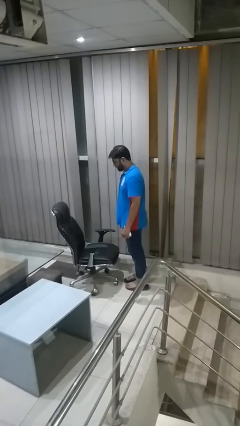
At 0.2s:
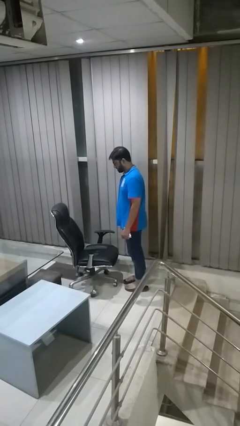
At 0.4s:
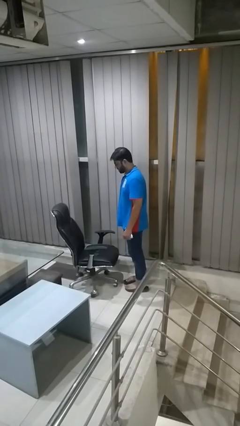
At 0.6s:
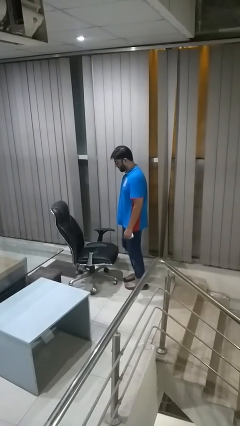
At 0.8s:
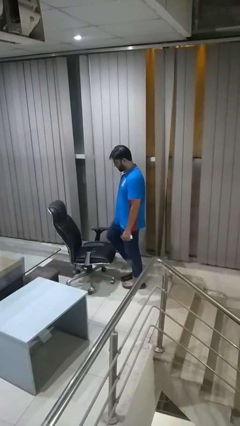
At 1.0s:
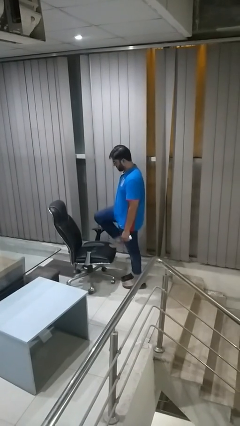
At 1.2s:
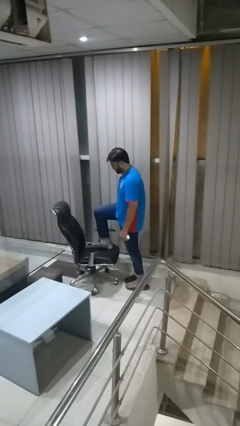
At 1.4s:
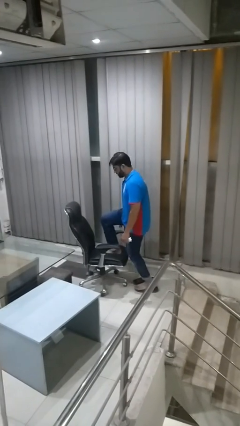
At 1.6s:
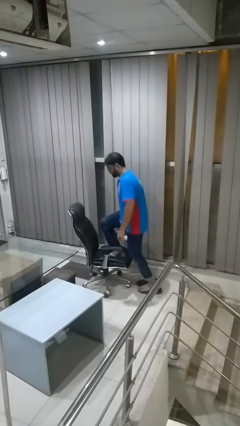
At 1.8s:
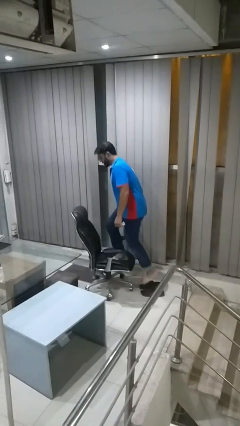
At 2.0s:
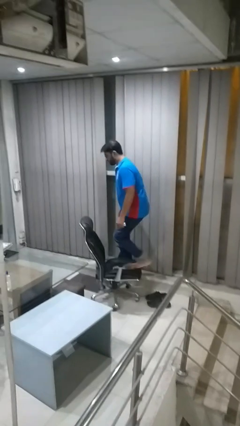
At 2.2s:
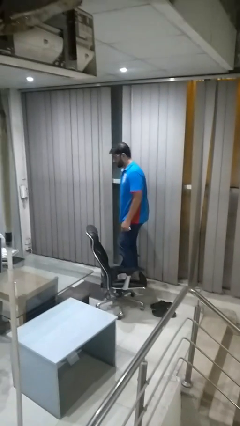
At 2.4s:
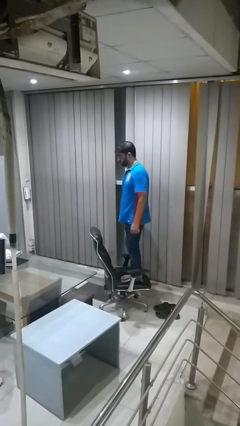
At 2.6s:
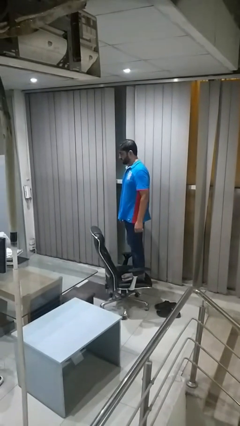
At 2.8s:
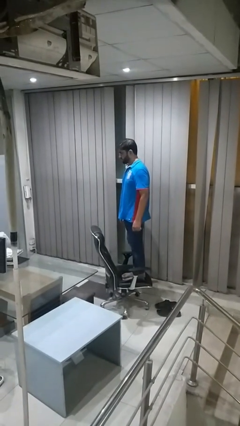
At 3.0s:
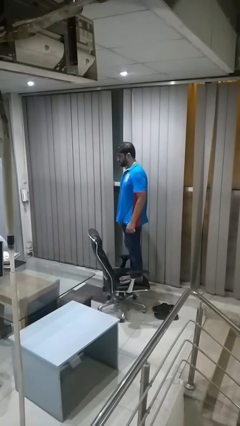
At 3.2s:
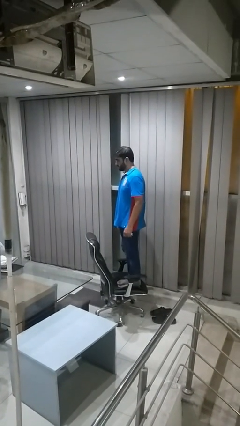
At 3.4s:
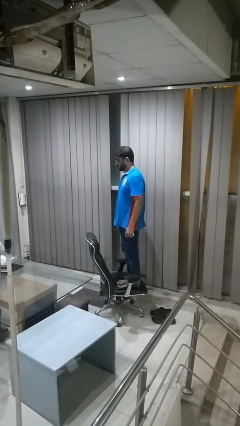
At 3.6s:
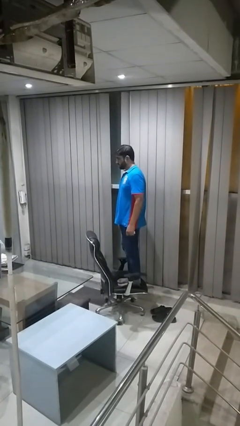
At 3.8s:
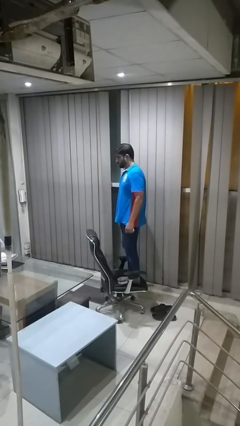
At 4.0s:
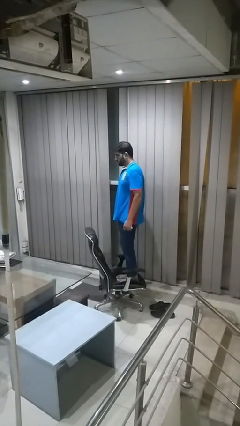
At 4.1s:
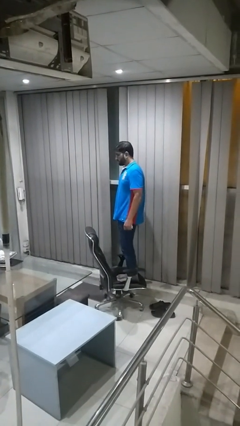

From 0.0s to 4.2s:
person climbs on chair

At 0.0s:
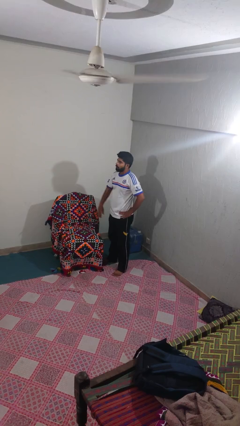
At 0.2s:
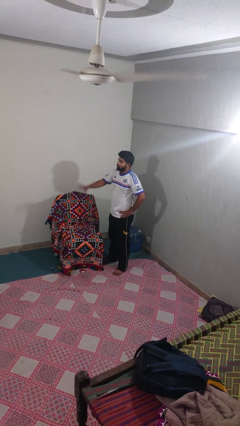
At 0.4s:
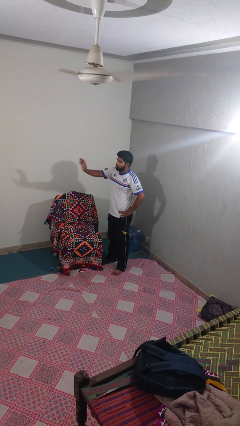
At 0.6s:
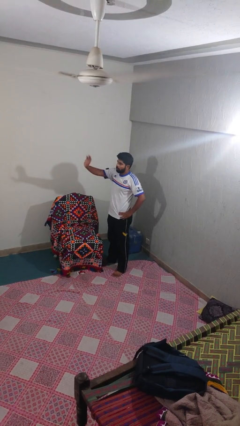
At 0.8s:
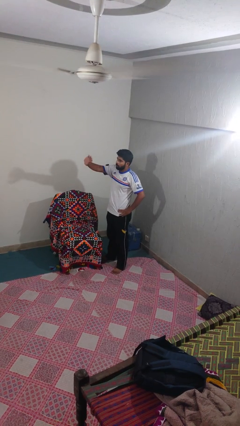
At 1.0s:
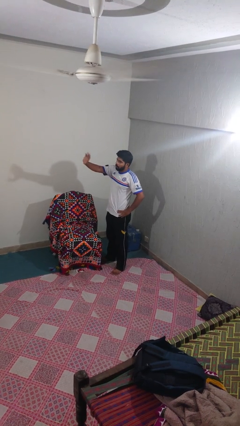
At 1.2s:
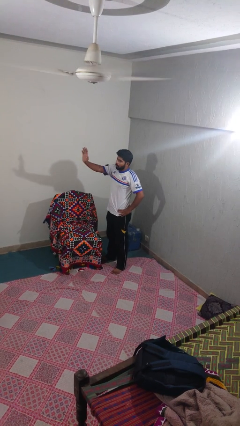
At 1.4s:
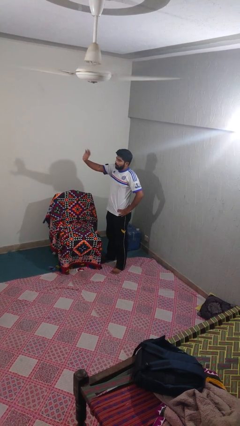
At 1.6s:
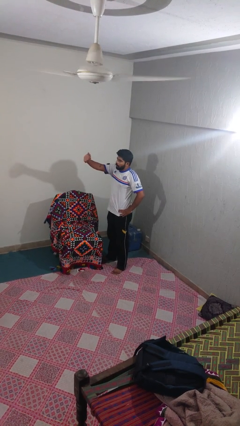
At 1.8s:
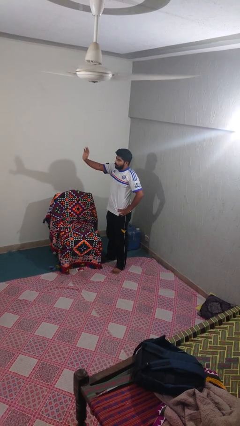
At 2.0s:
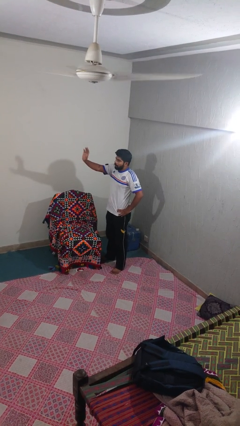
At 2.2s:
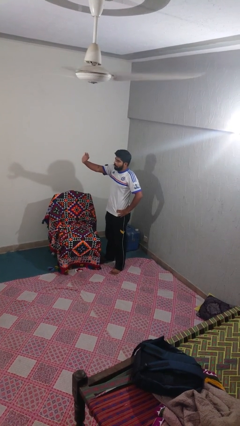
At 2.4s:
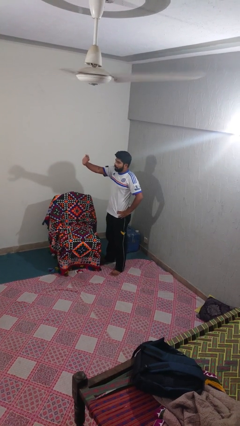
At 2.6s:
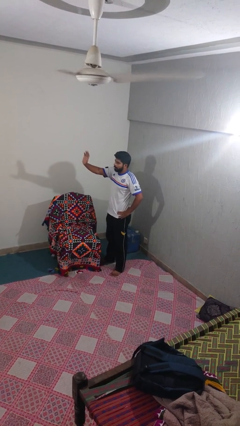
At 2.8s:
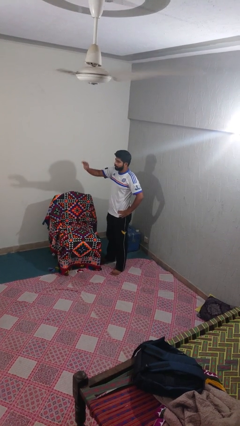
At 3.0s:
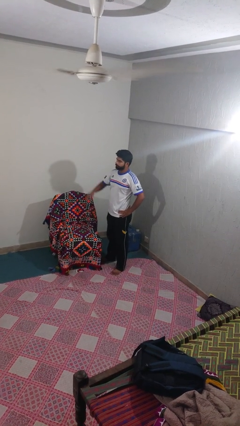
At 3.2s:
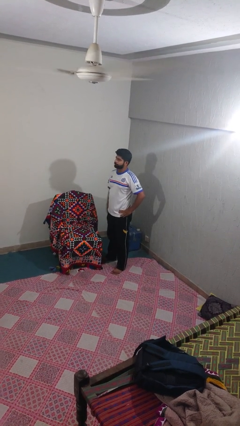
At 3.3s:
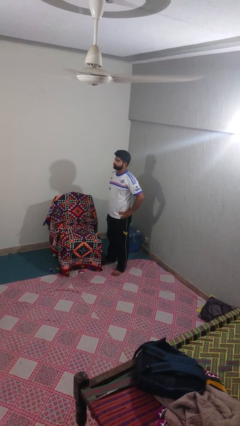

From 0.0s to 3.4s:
person waves at person

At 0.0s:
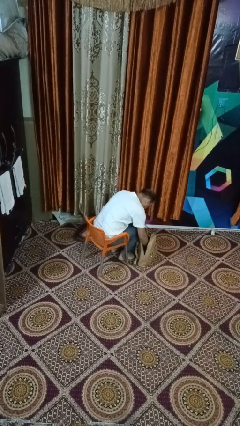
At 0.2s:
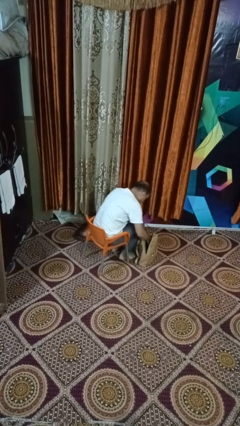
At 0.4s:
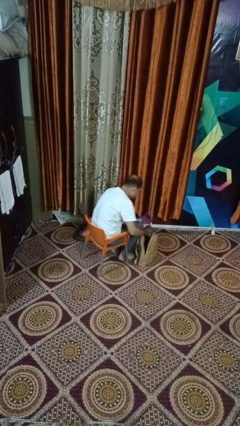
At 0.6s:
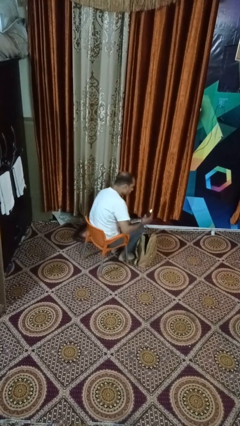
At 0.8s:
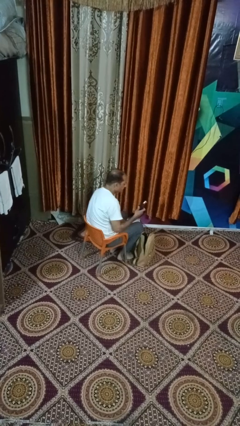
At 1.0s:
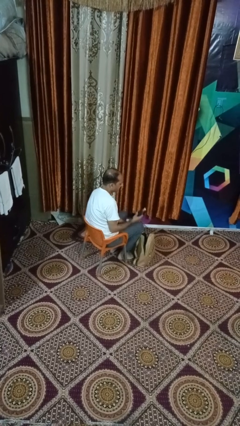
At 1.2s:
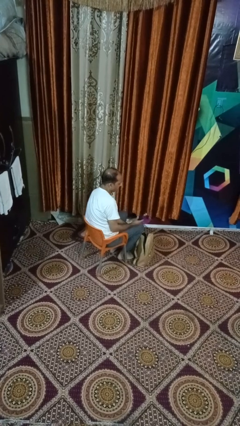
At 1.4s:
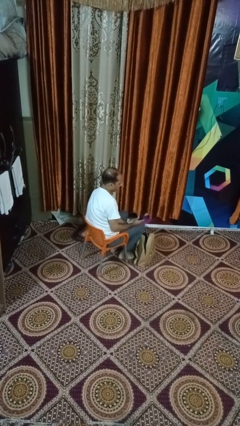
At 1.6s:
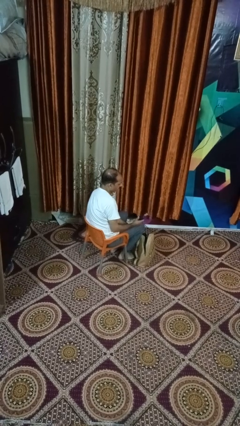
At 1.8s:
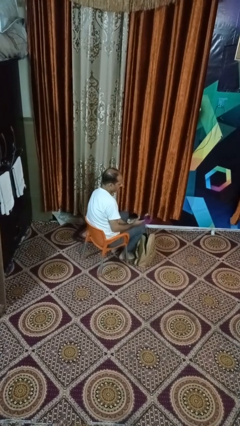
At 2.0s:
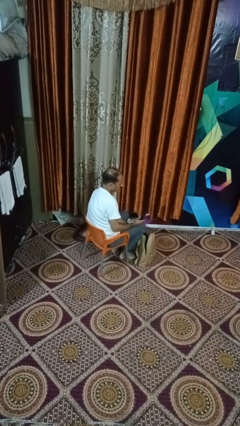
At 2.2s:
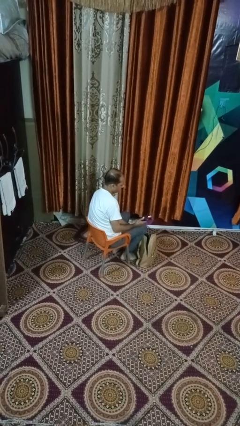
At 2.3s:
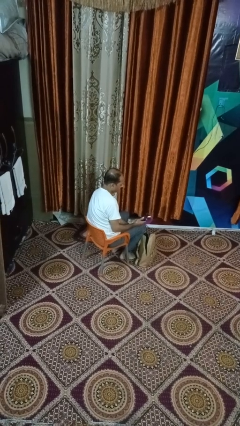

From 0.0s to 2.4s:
person takes object from purse

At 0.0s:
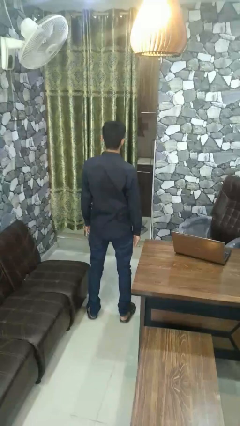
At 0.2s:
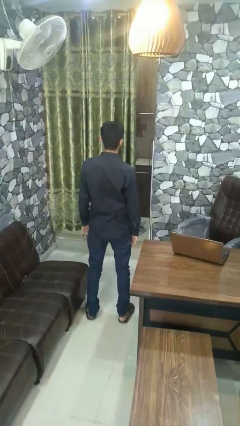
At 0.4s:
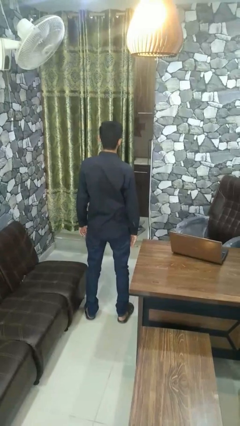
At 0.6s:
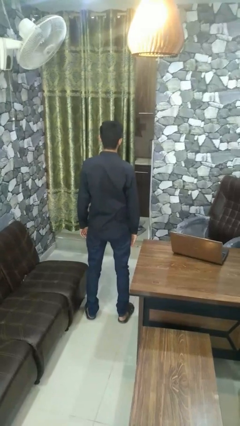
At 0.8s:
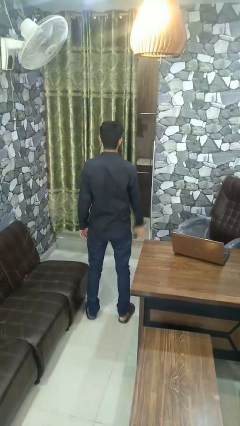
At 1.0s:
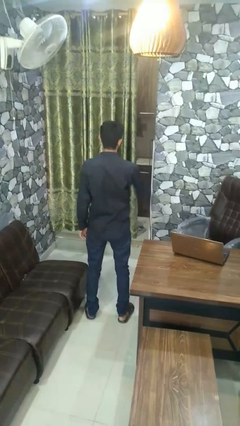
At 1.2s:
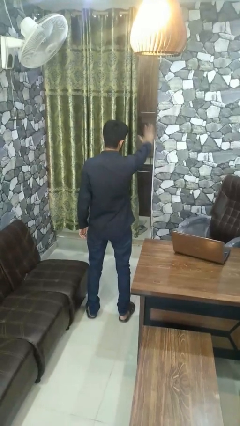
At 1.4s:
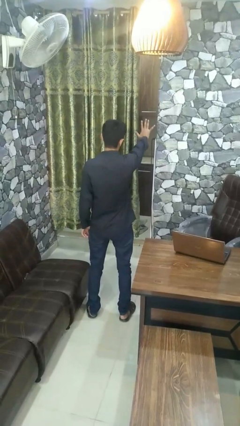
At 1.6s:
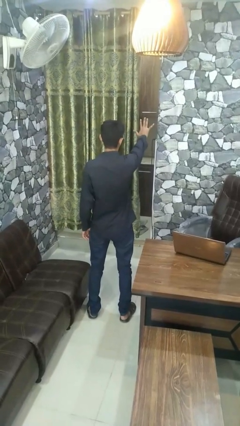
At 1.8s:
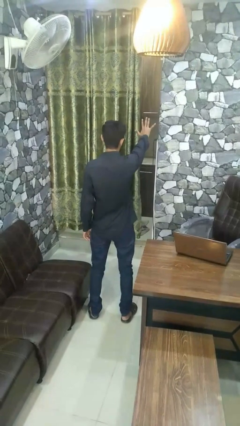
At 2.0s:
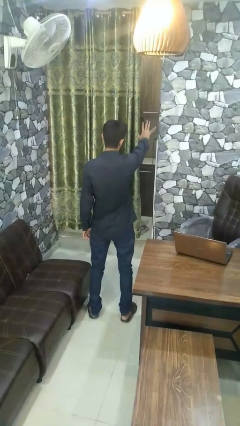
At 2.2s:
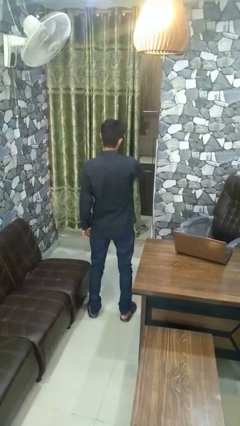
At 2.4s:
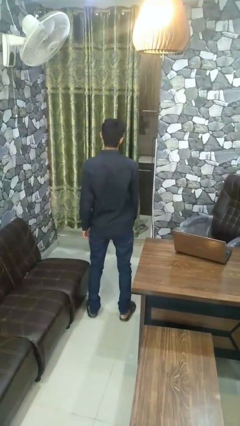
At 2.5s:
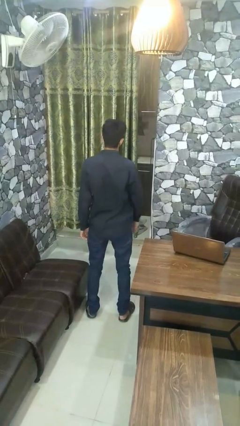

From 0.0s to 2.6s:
person gestures number five

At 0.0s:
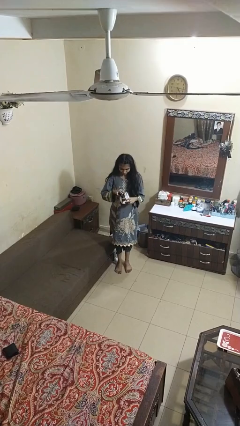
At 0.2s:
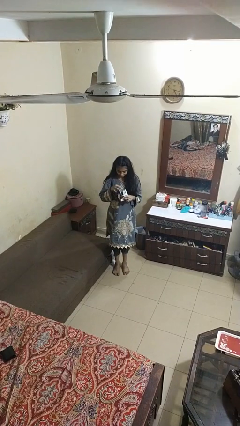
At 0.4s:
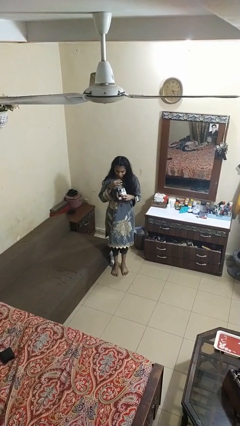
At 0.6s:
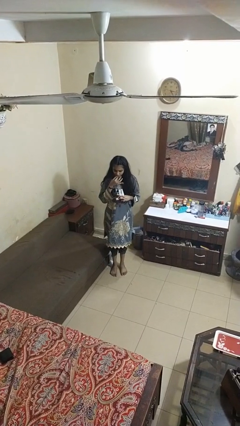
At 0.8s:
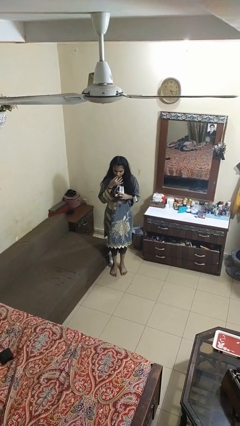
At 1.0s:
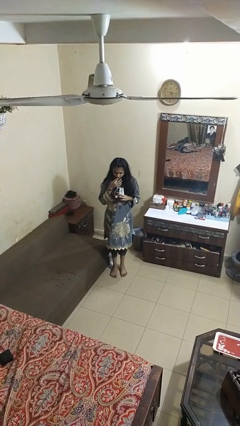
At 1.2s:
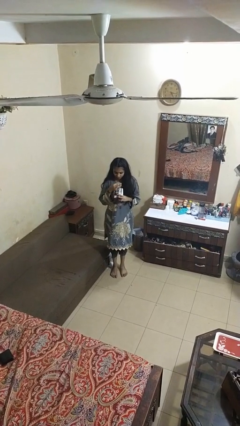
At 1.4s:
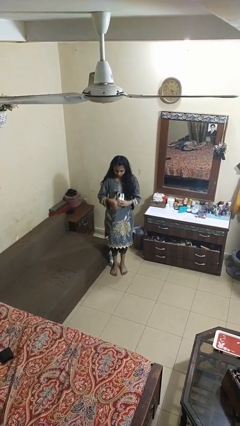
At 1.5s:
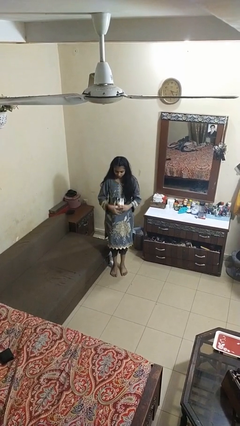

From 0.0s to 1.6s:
person eats snack from bag

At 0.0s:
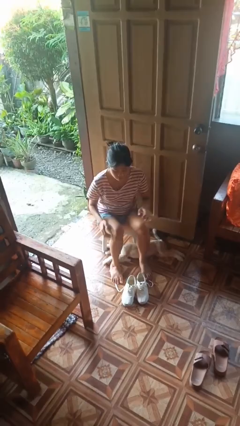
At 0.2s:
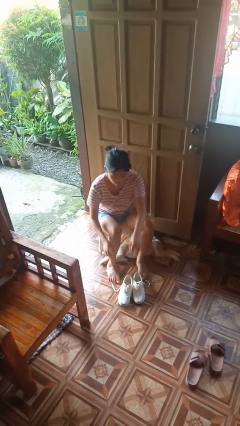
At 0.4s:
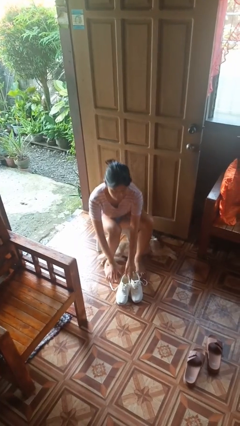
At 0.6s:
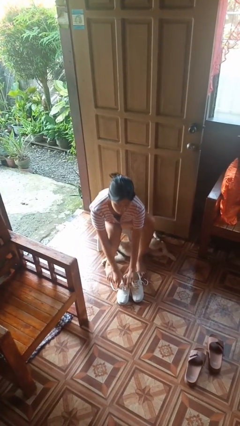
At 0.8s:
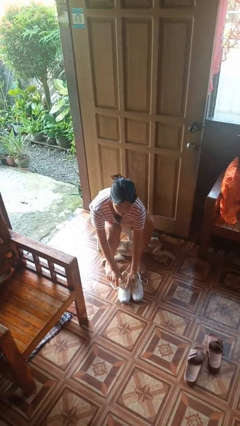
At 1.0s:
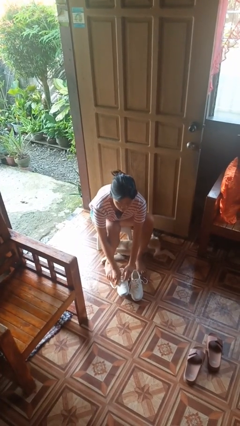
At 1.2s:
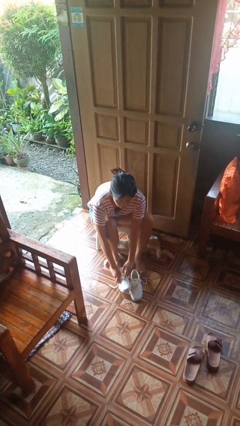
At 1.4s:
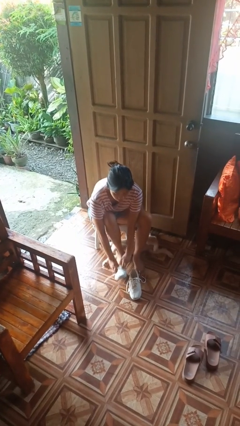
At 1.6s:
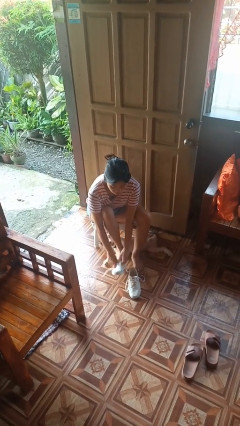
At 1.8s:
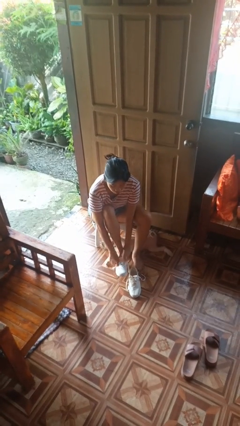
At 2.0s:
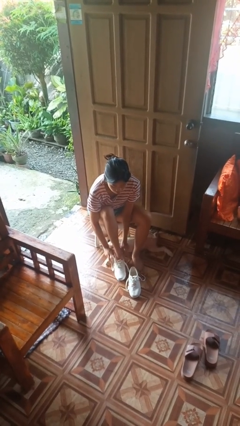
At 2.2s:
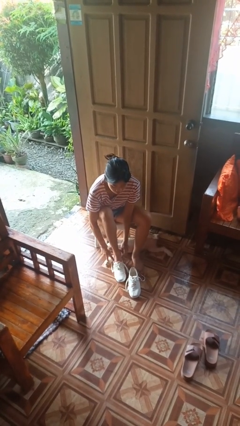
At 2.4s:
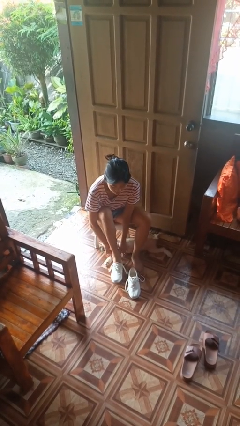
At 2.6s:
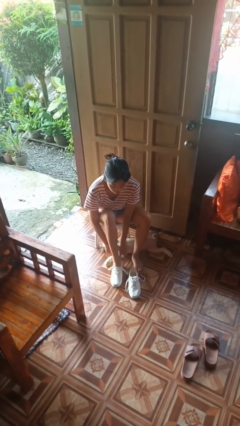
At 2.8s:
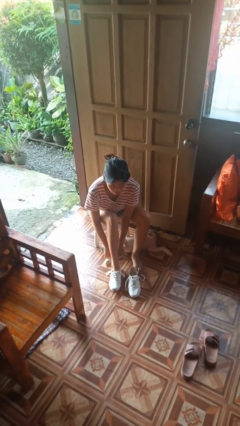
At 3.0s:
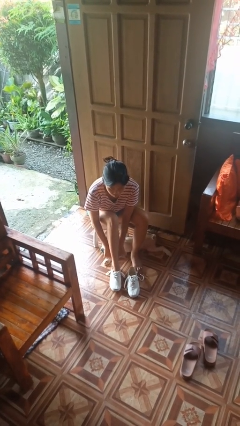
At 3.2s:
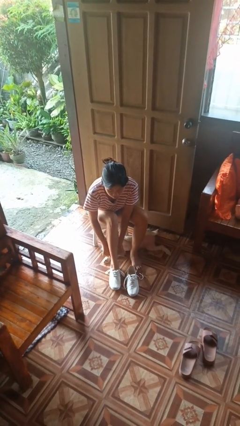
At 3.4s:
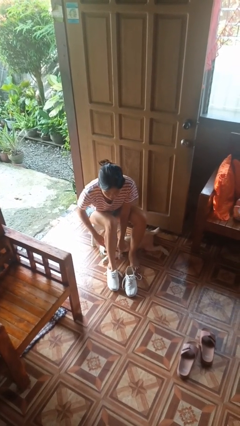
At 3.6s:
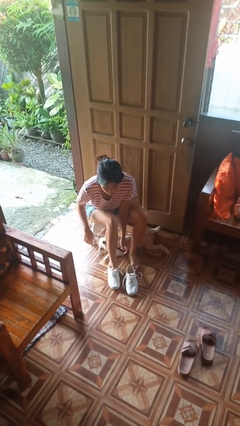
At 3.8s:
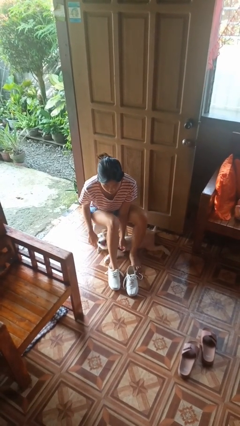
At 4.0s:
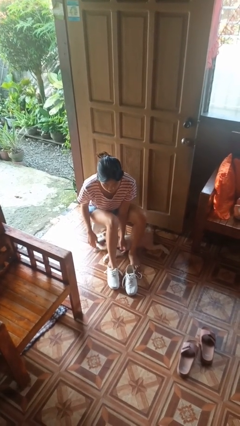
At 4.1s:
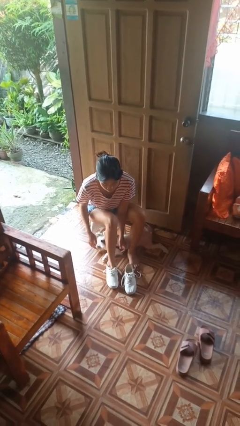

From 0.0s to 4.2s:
person puts on shoes
